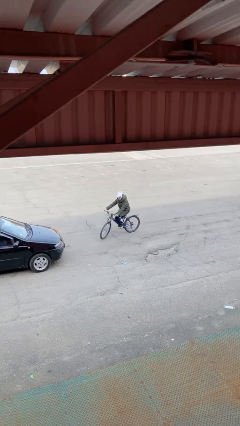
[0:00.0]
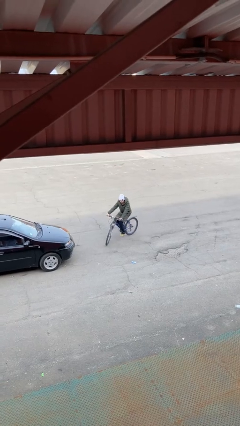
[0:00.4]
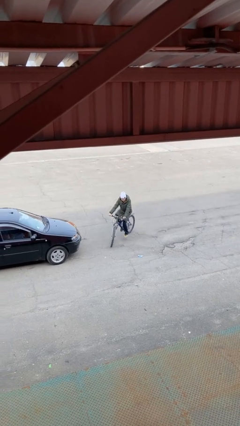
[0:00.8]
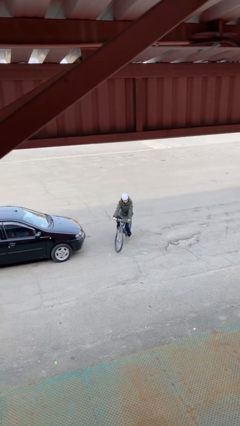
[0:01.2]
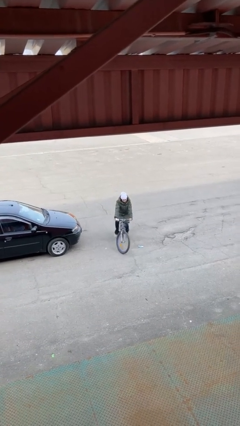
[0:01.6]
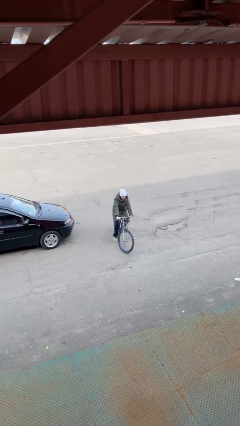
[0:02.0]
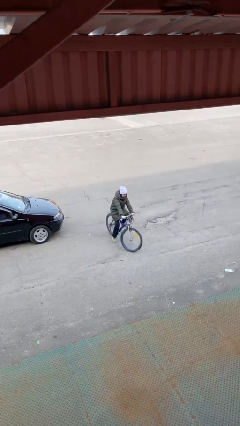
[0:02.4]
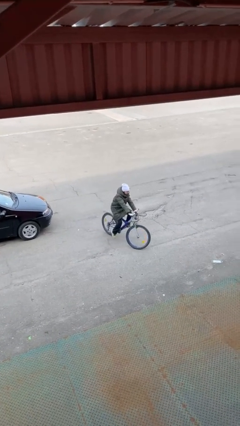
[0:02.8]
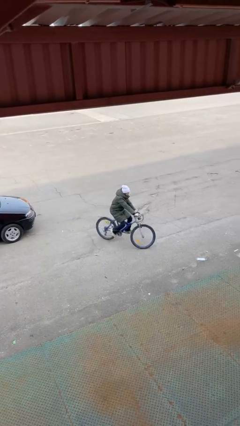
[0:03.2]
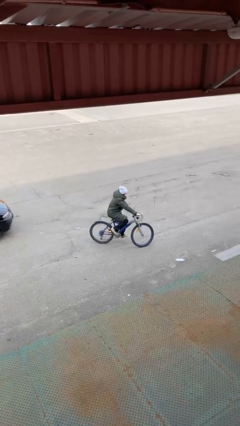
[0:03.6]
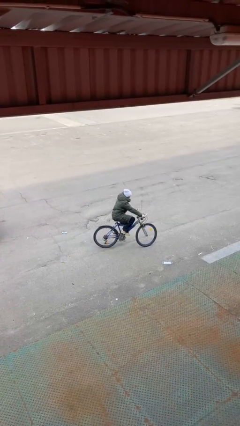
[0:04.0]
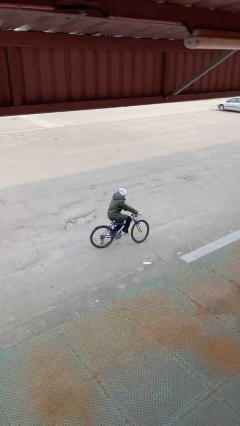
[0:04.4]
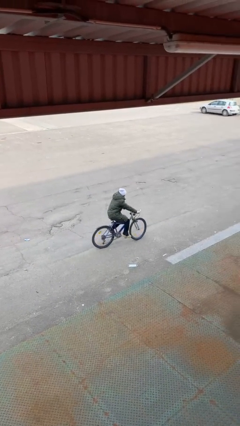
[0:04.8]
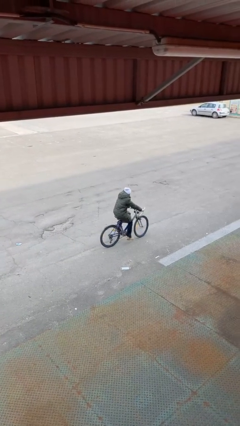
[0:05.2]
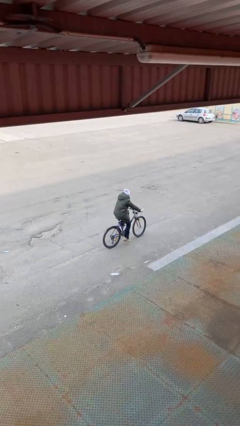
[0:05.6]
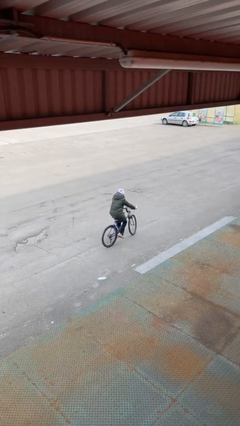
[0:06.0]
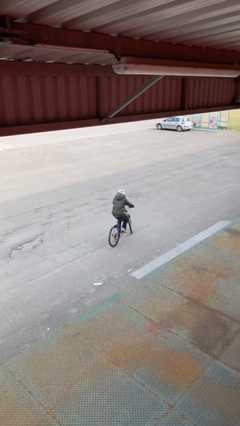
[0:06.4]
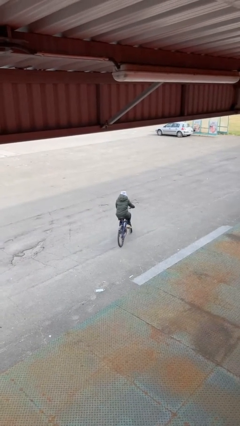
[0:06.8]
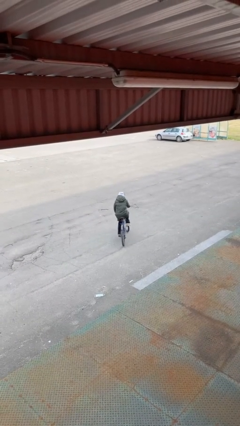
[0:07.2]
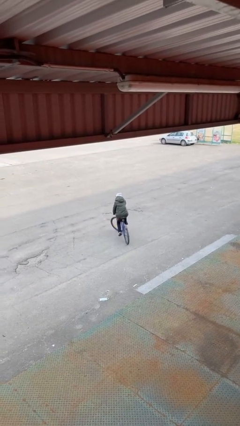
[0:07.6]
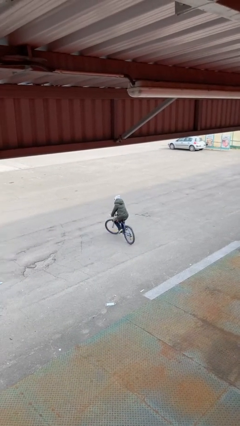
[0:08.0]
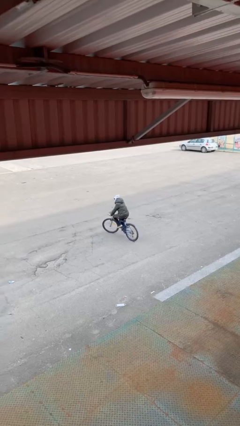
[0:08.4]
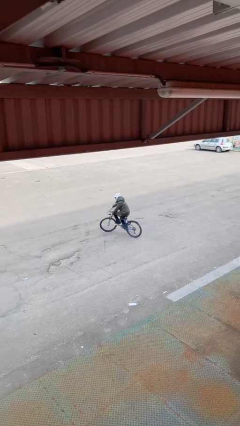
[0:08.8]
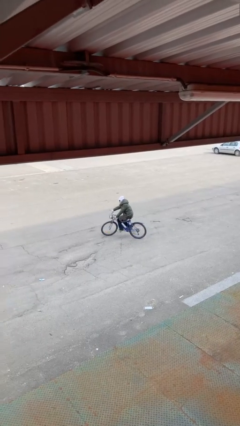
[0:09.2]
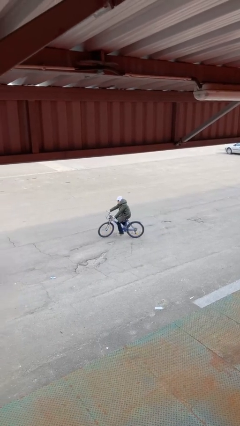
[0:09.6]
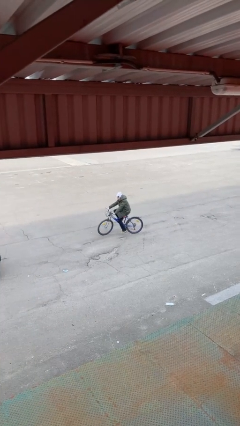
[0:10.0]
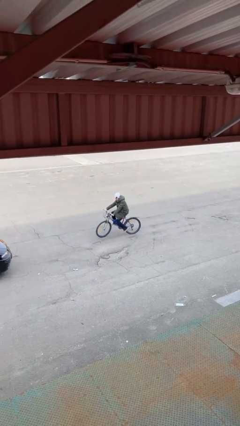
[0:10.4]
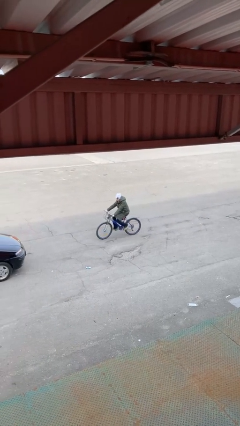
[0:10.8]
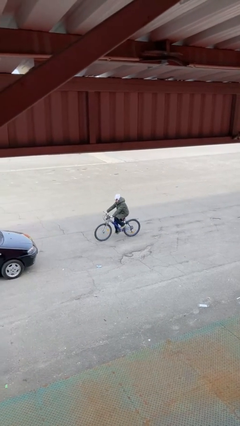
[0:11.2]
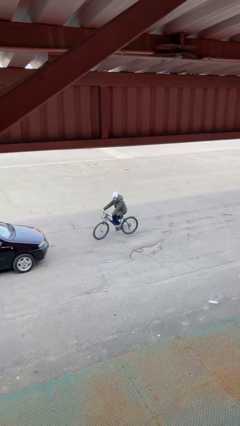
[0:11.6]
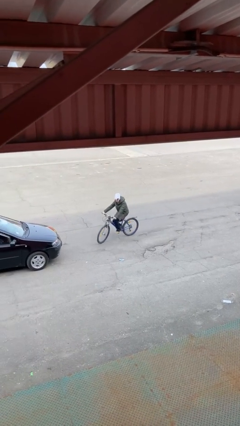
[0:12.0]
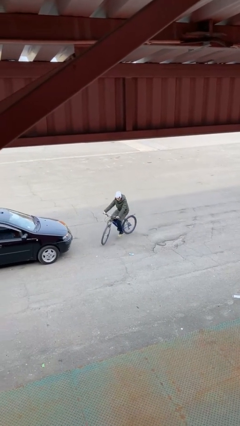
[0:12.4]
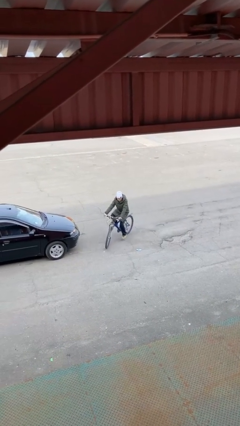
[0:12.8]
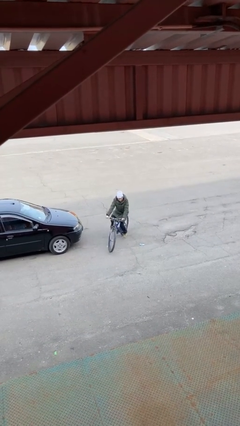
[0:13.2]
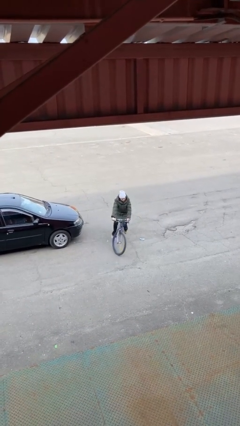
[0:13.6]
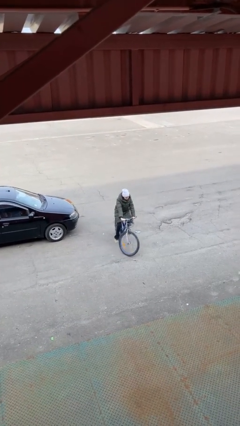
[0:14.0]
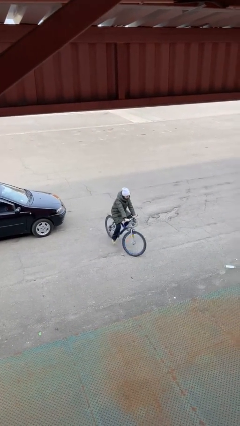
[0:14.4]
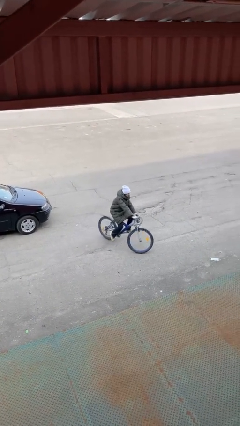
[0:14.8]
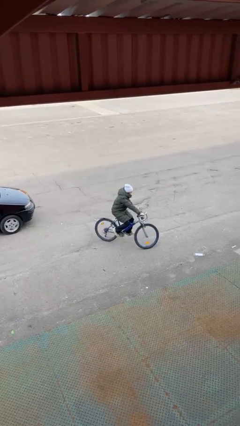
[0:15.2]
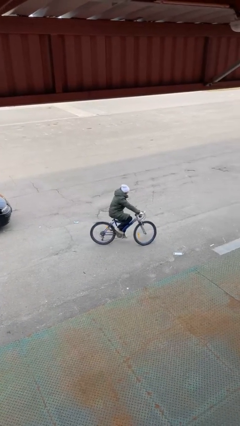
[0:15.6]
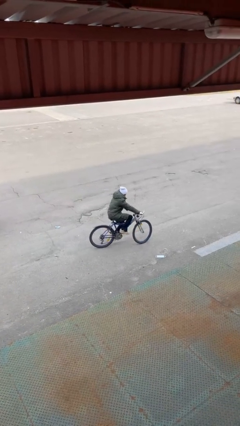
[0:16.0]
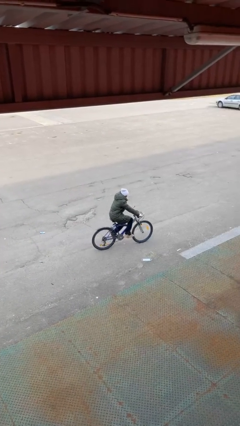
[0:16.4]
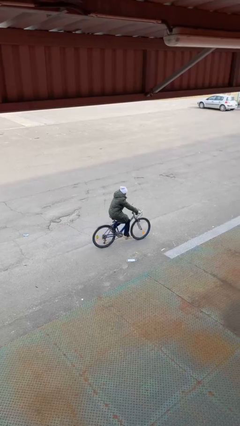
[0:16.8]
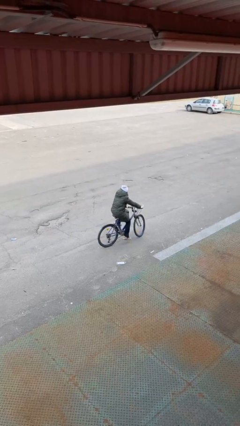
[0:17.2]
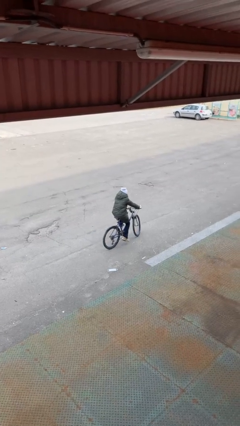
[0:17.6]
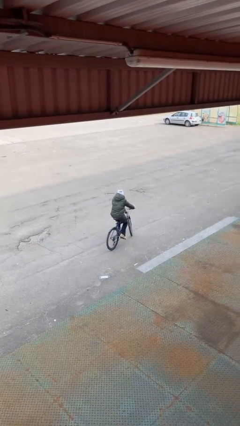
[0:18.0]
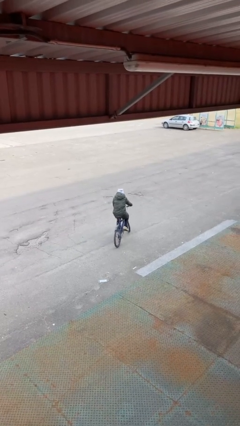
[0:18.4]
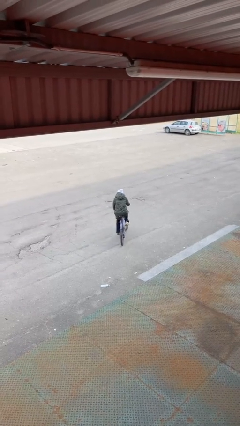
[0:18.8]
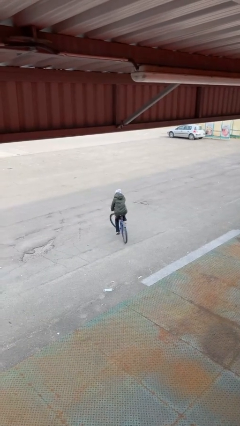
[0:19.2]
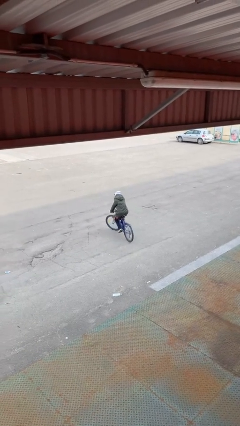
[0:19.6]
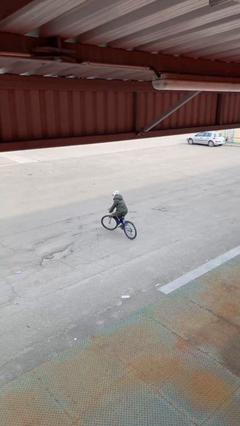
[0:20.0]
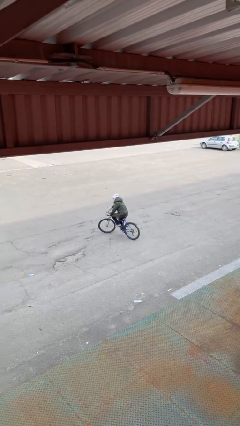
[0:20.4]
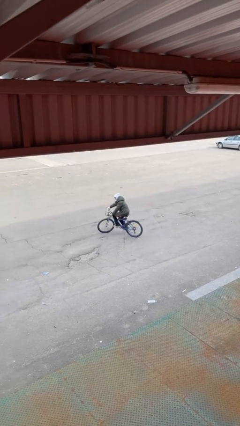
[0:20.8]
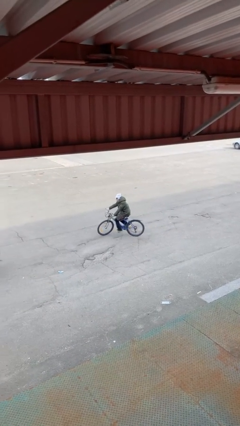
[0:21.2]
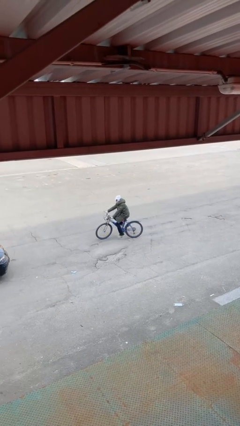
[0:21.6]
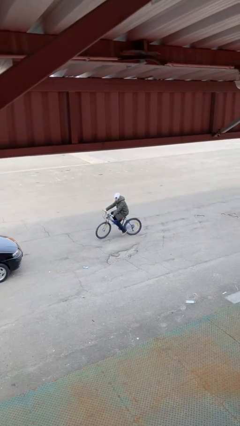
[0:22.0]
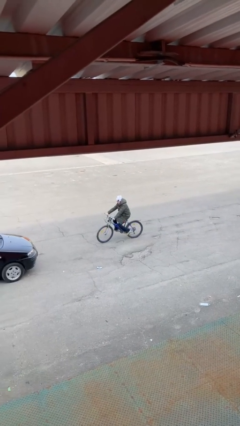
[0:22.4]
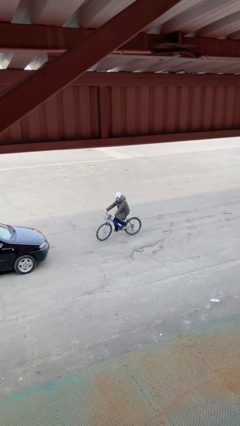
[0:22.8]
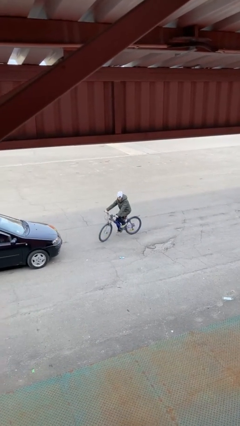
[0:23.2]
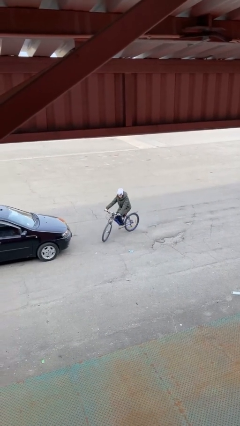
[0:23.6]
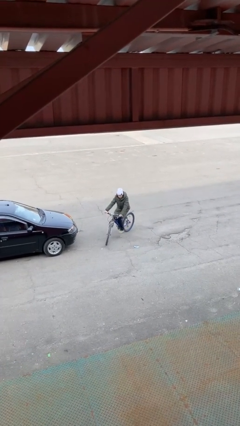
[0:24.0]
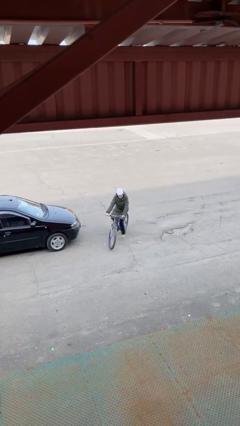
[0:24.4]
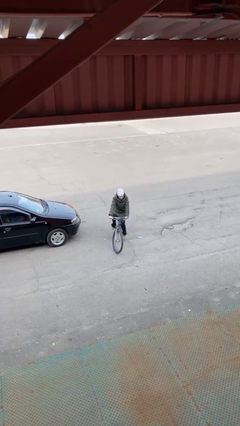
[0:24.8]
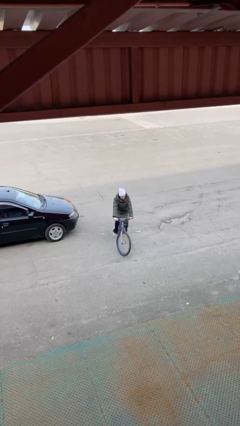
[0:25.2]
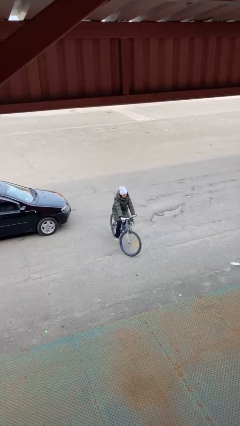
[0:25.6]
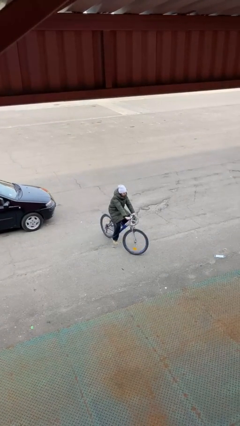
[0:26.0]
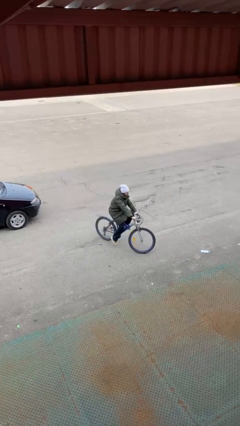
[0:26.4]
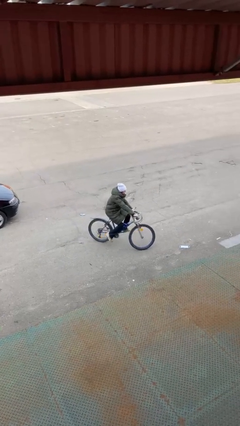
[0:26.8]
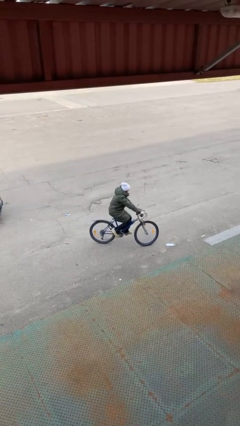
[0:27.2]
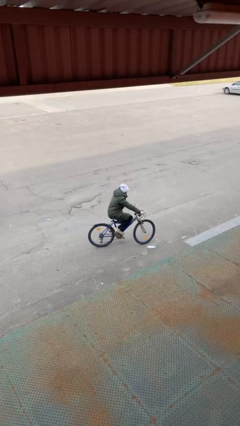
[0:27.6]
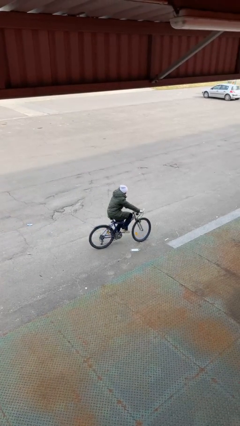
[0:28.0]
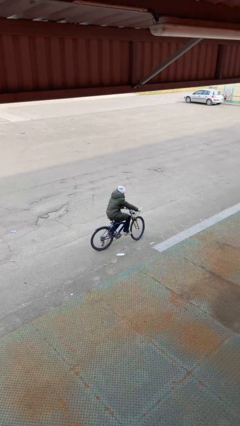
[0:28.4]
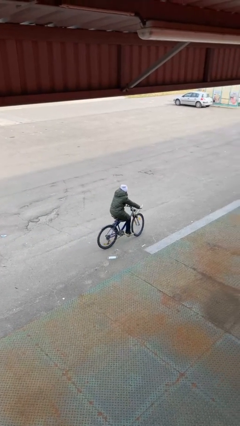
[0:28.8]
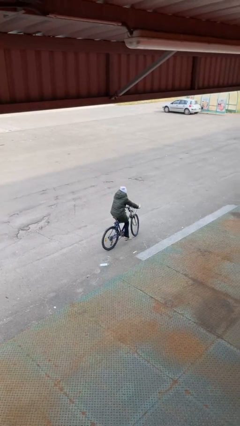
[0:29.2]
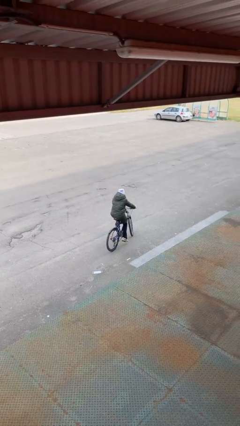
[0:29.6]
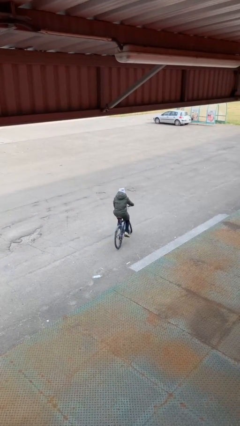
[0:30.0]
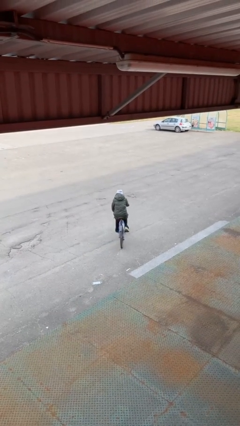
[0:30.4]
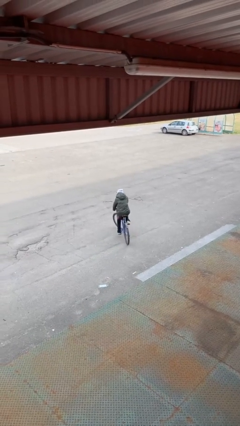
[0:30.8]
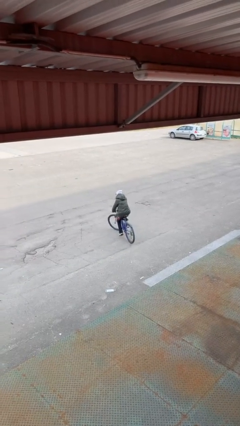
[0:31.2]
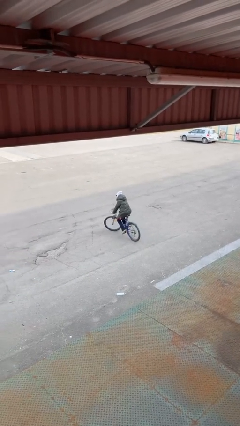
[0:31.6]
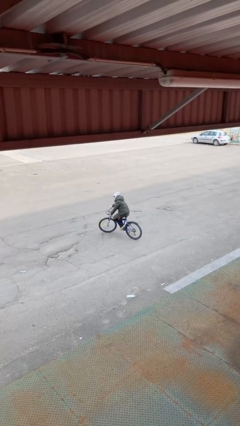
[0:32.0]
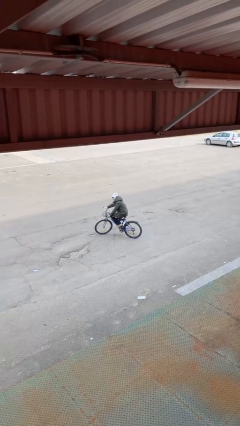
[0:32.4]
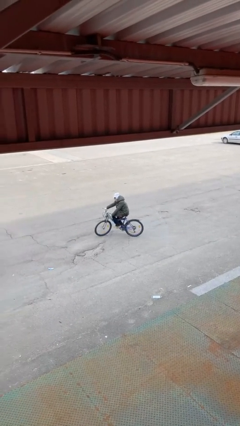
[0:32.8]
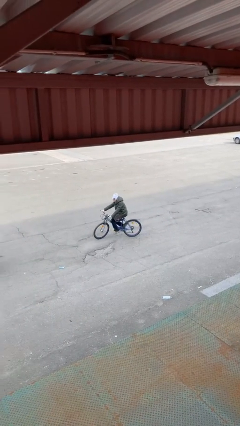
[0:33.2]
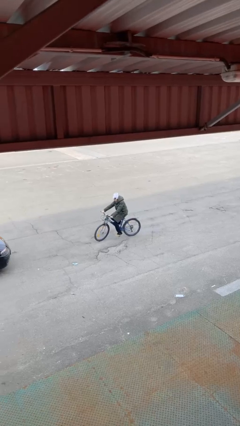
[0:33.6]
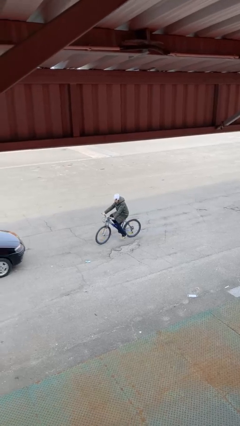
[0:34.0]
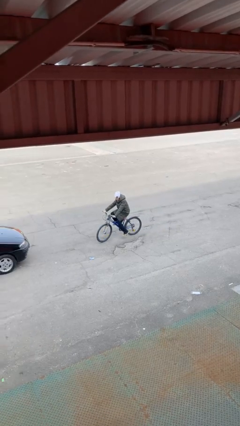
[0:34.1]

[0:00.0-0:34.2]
person rides bicycle

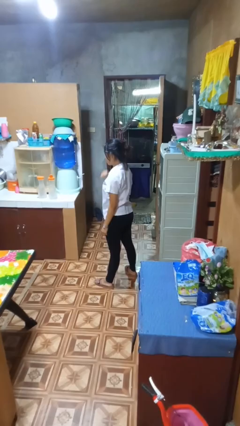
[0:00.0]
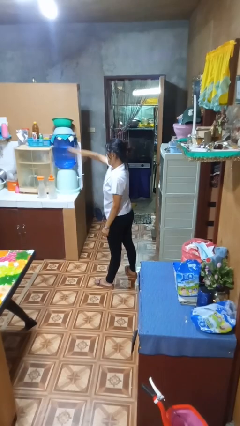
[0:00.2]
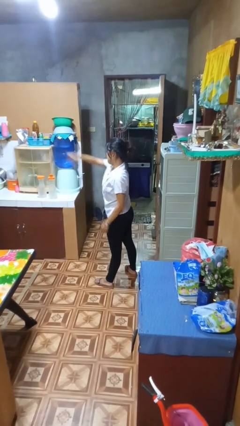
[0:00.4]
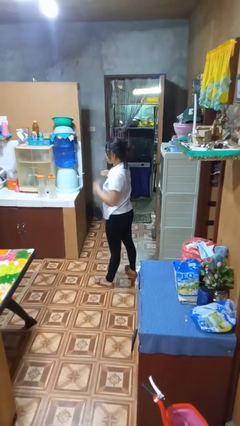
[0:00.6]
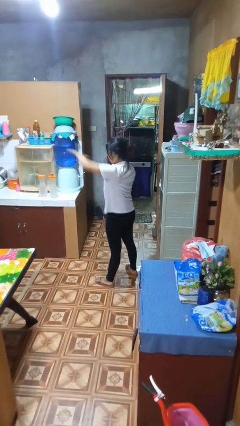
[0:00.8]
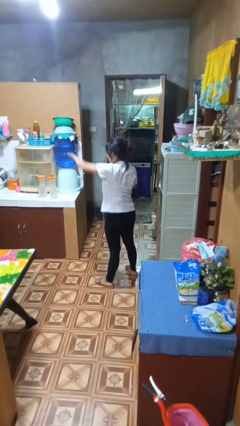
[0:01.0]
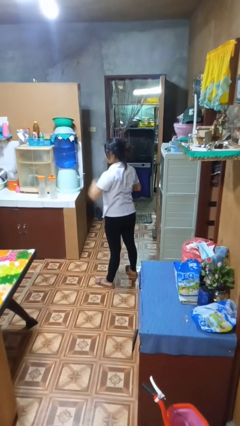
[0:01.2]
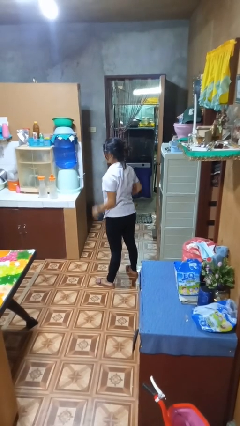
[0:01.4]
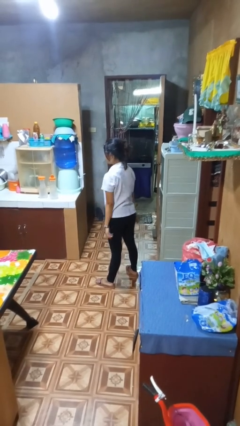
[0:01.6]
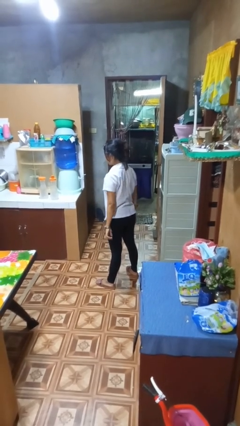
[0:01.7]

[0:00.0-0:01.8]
person punches
